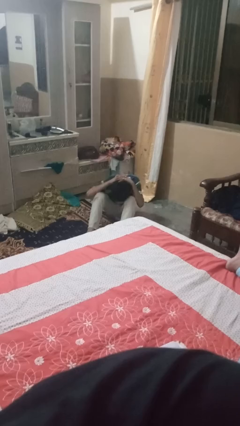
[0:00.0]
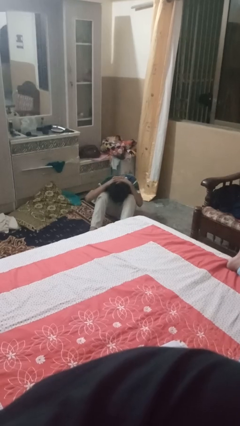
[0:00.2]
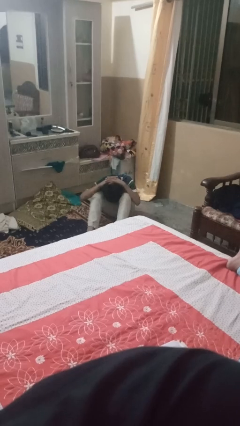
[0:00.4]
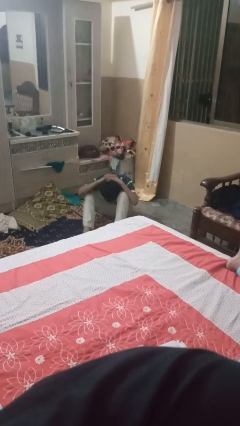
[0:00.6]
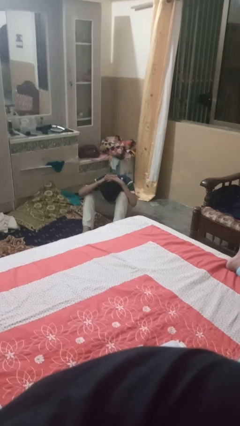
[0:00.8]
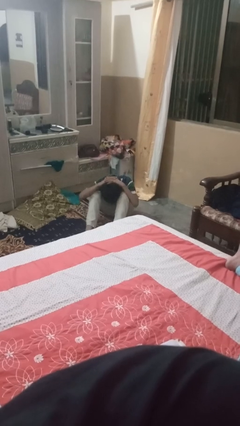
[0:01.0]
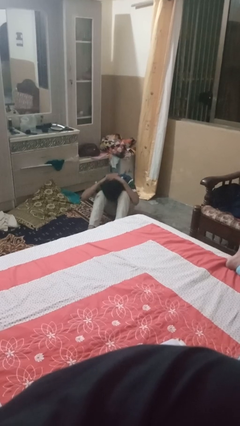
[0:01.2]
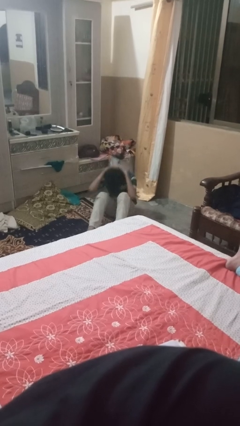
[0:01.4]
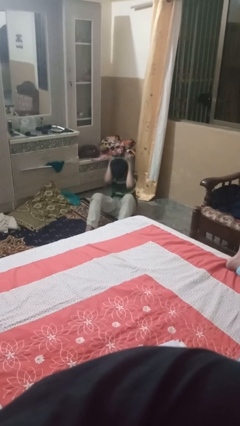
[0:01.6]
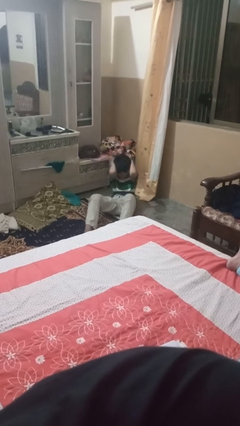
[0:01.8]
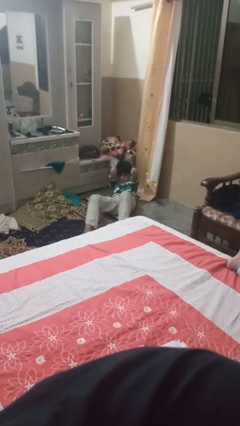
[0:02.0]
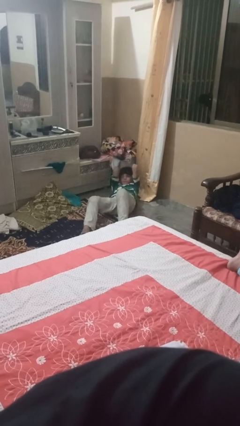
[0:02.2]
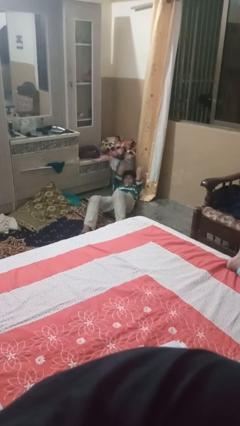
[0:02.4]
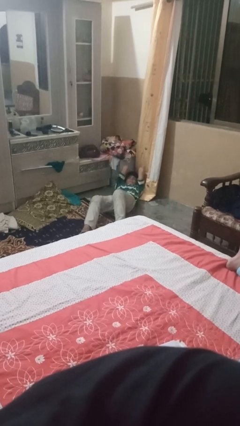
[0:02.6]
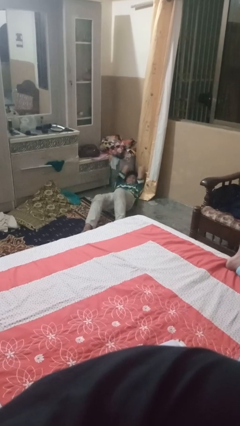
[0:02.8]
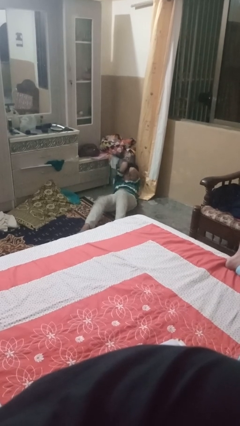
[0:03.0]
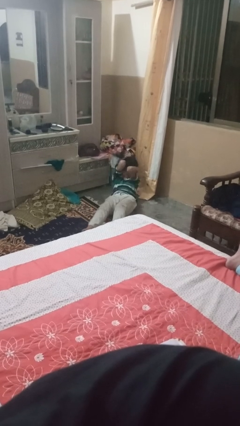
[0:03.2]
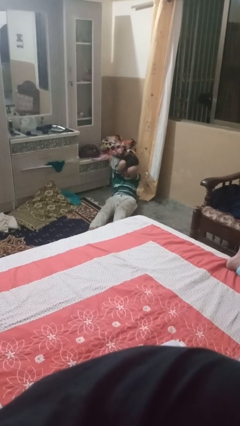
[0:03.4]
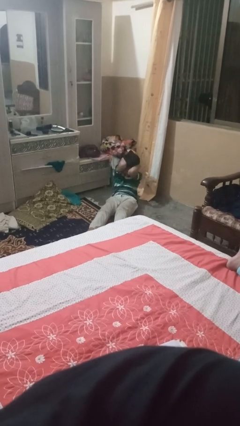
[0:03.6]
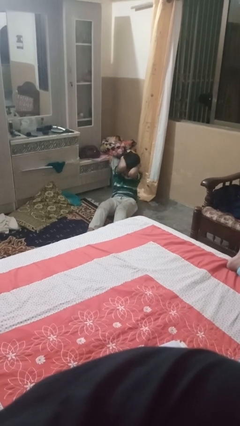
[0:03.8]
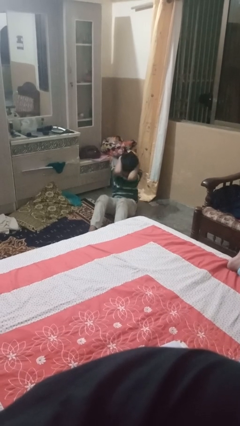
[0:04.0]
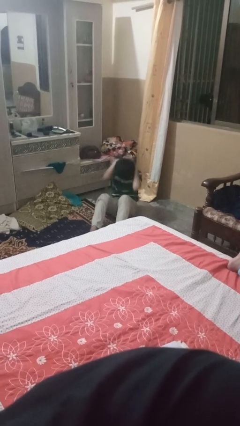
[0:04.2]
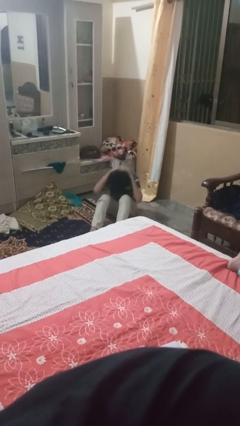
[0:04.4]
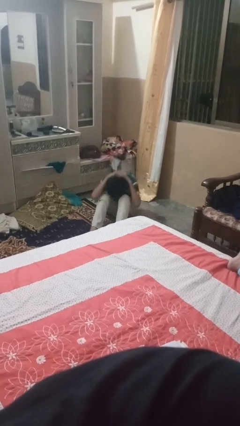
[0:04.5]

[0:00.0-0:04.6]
person exercises with situp

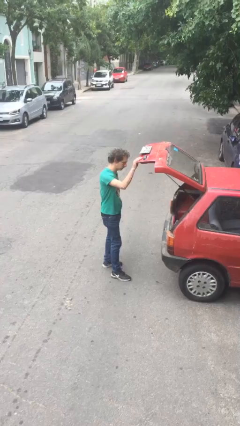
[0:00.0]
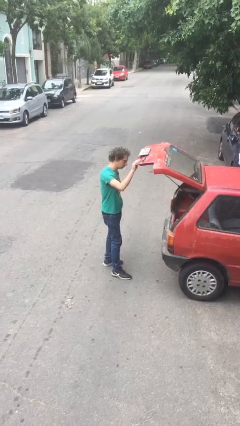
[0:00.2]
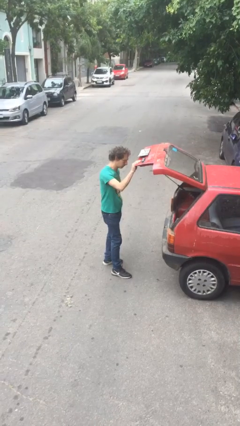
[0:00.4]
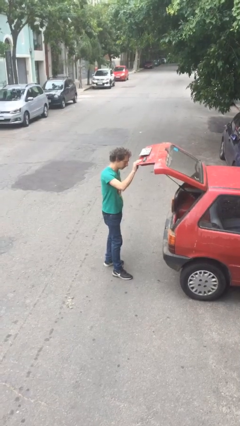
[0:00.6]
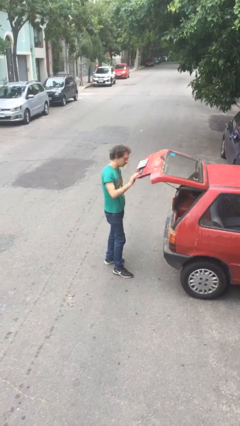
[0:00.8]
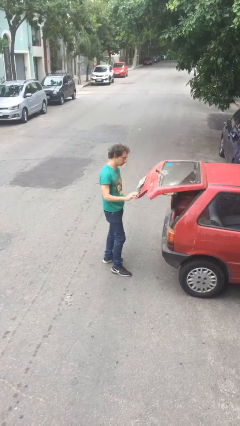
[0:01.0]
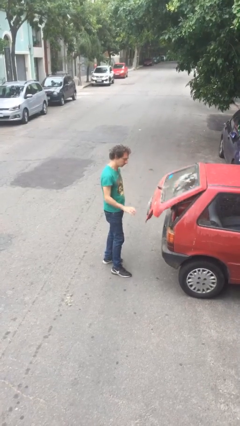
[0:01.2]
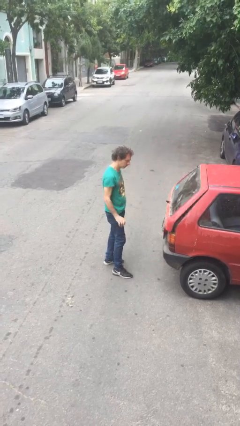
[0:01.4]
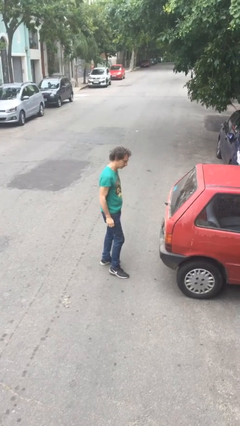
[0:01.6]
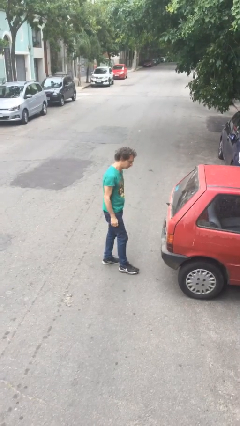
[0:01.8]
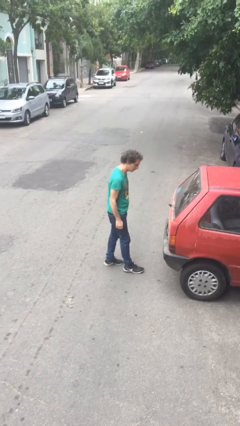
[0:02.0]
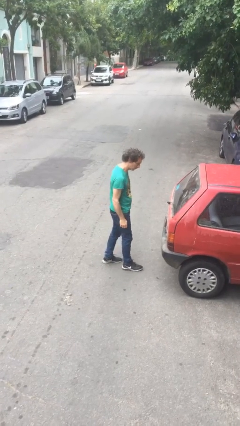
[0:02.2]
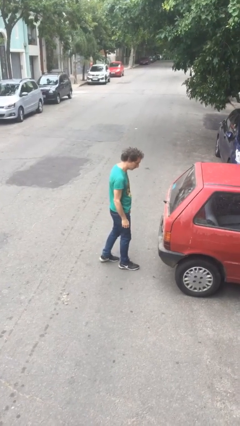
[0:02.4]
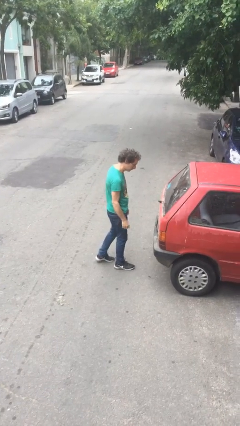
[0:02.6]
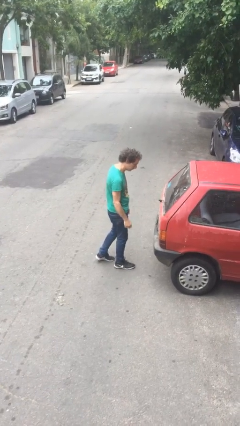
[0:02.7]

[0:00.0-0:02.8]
person closes car trunk

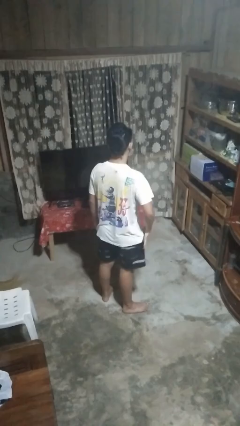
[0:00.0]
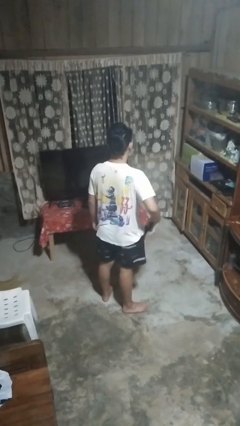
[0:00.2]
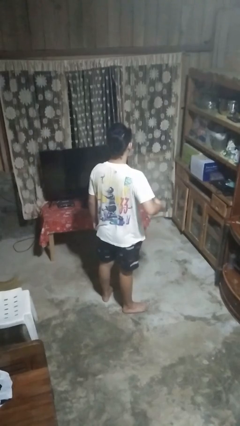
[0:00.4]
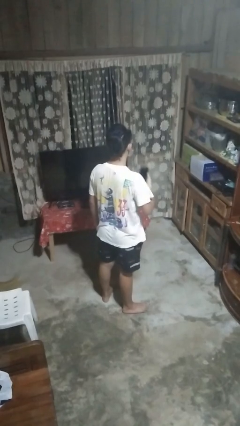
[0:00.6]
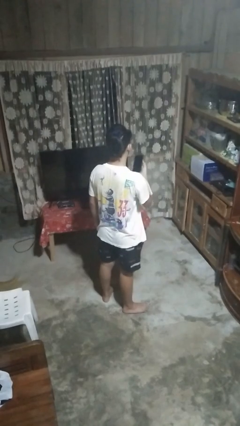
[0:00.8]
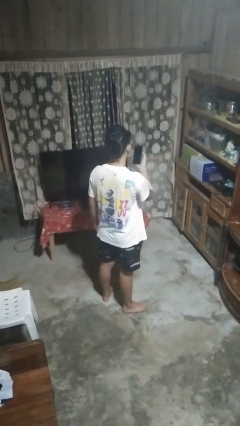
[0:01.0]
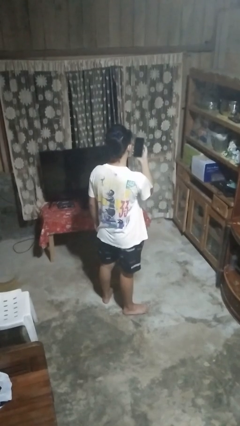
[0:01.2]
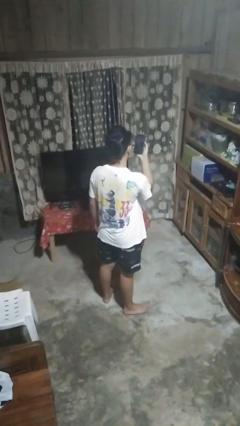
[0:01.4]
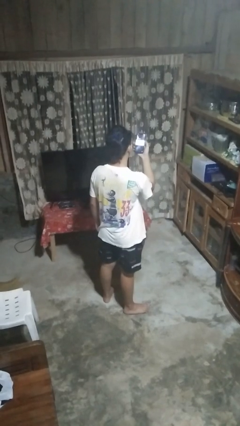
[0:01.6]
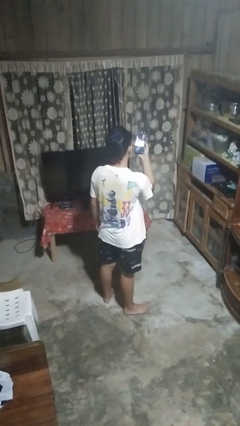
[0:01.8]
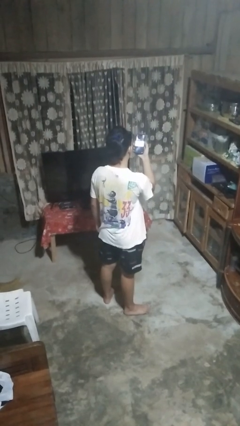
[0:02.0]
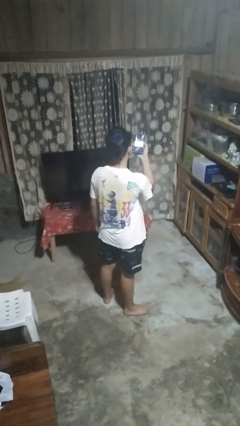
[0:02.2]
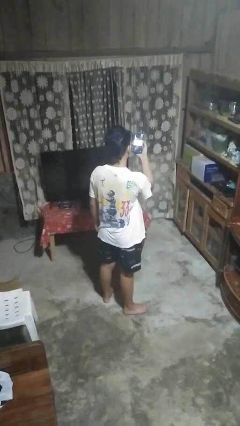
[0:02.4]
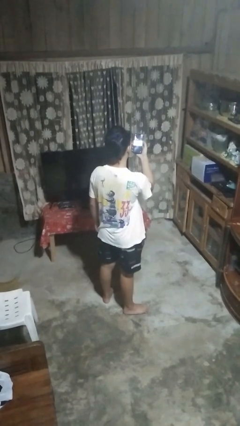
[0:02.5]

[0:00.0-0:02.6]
person takes phone from pocket

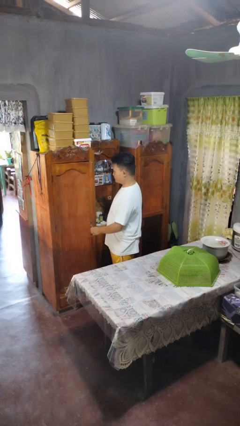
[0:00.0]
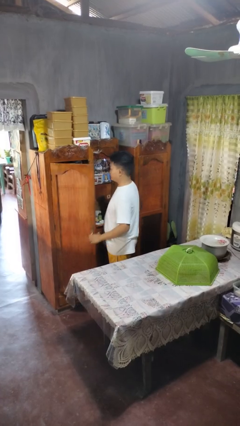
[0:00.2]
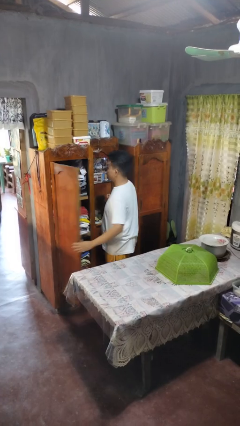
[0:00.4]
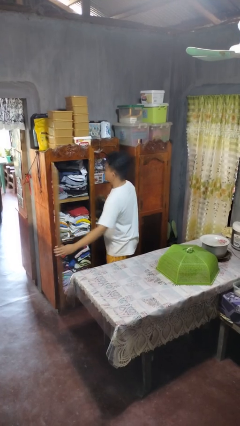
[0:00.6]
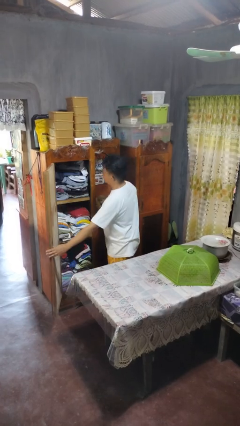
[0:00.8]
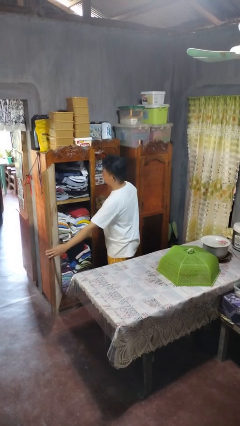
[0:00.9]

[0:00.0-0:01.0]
person opens closet door

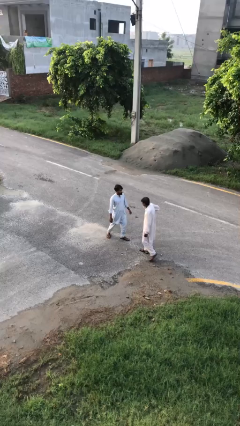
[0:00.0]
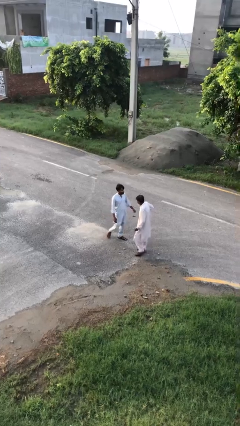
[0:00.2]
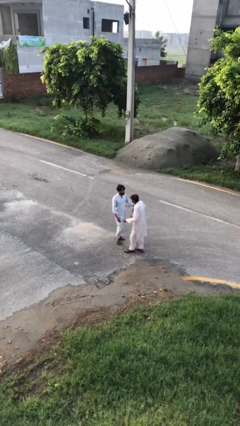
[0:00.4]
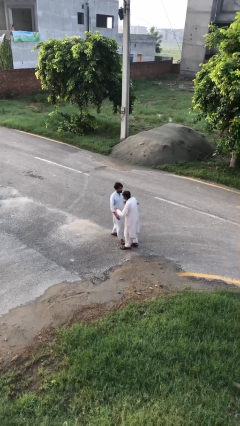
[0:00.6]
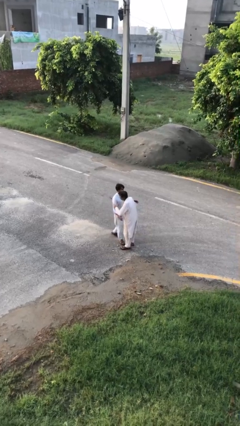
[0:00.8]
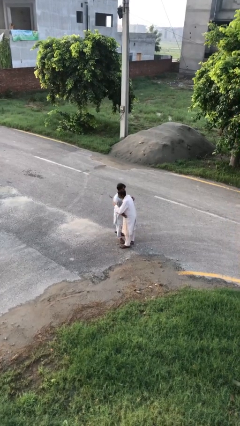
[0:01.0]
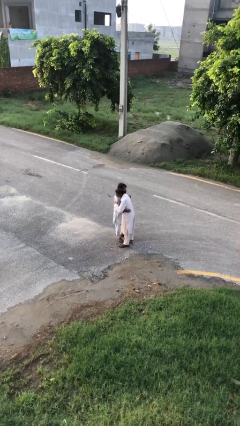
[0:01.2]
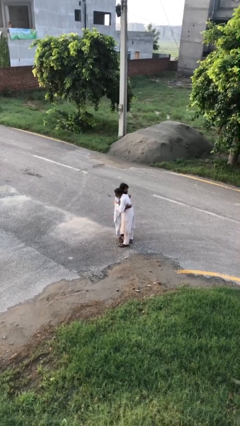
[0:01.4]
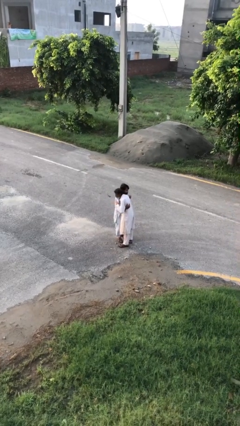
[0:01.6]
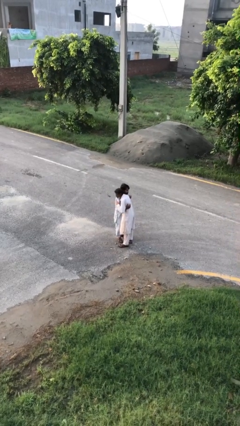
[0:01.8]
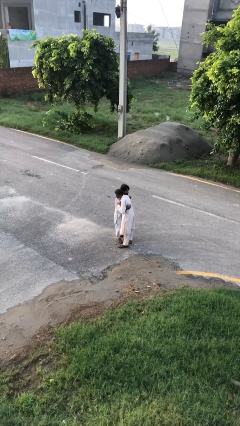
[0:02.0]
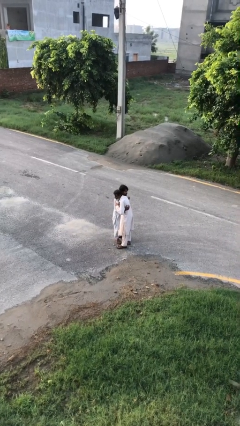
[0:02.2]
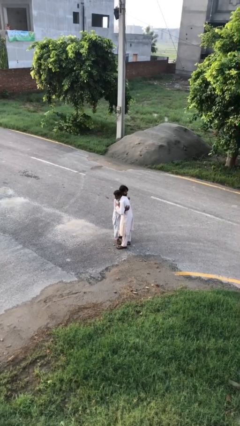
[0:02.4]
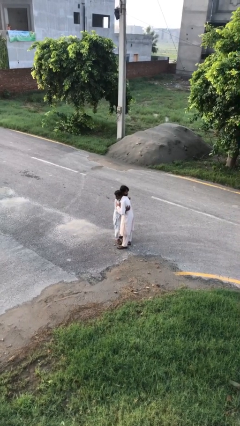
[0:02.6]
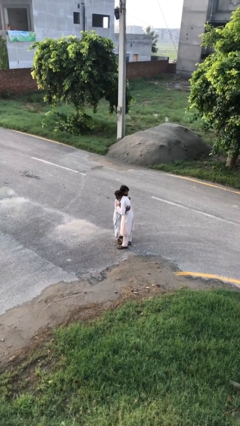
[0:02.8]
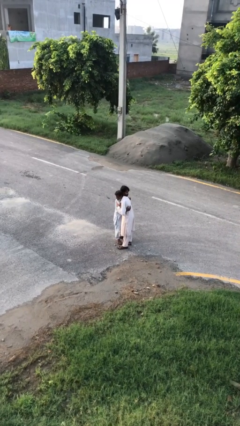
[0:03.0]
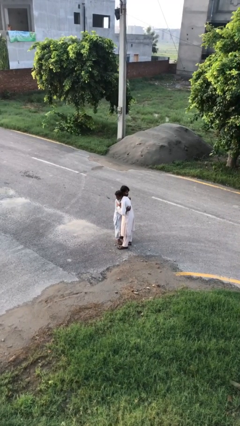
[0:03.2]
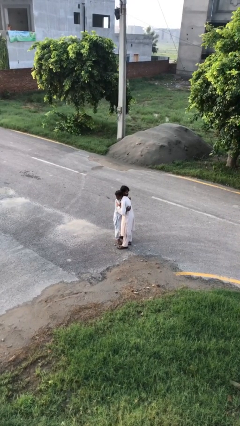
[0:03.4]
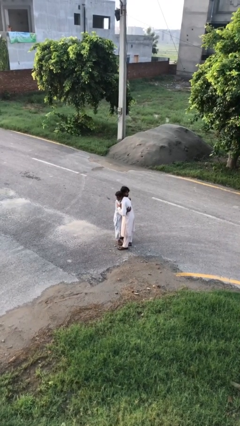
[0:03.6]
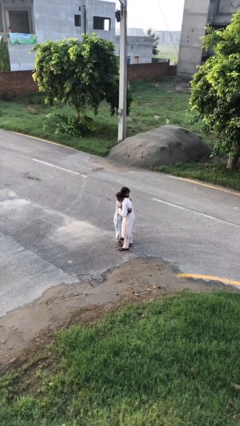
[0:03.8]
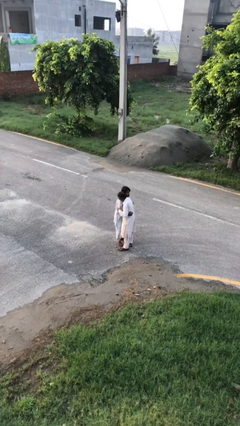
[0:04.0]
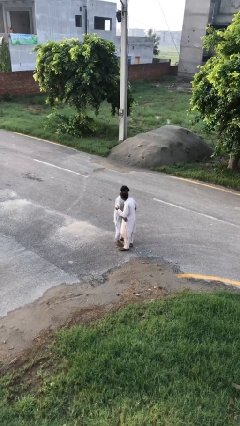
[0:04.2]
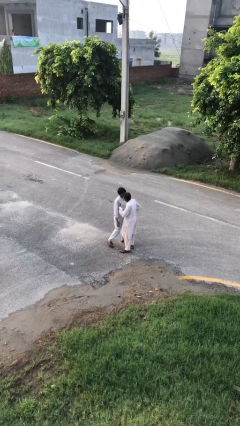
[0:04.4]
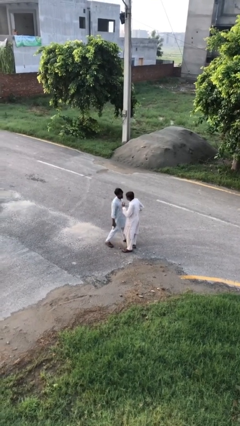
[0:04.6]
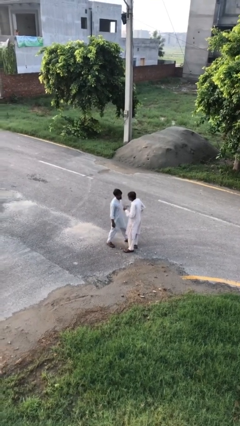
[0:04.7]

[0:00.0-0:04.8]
person embraces person

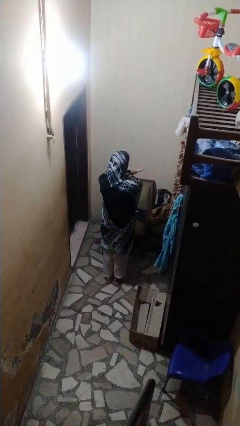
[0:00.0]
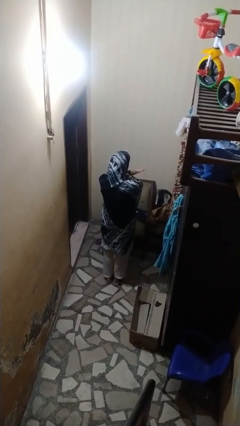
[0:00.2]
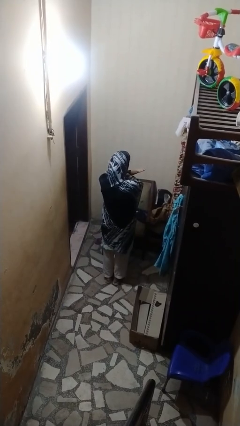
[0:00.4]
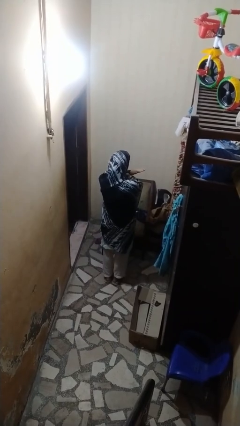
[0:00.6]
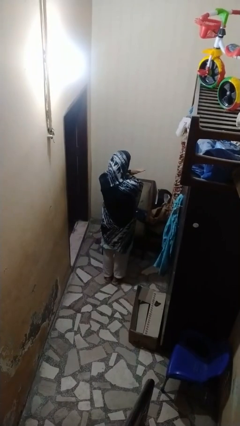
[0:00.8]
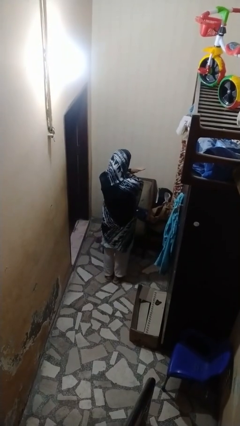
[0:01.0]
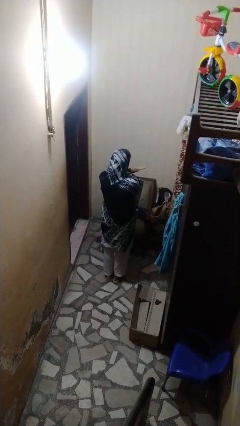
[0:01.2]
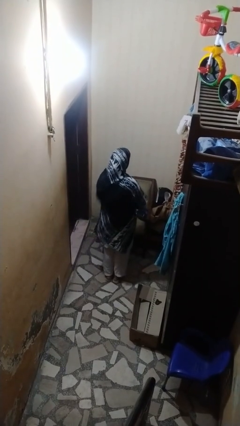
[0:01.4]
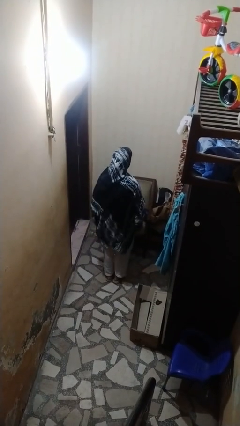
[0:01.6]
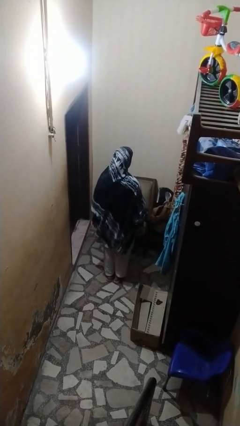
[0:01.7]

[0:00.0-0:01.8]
person gestures arms x

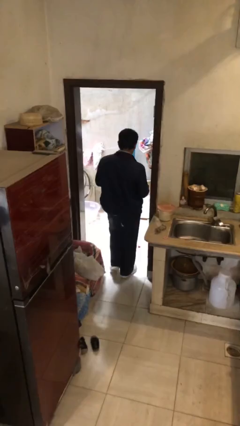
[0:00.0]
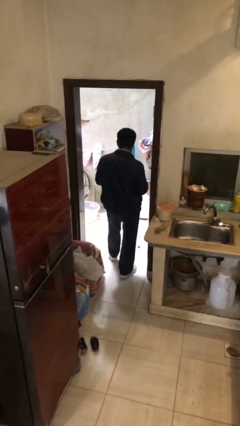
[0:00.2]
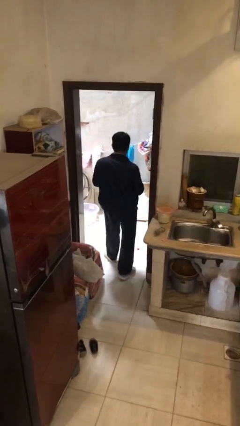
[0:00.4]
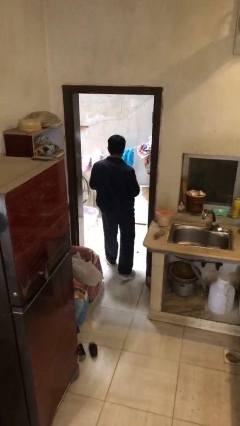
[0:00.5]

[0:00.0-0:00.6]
person exits scene through structure
